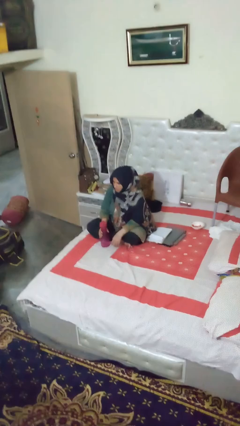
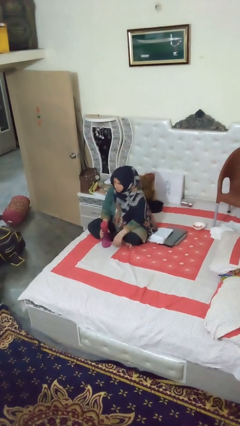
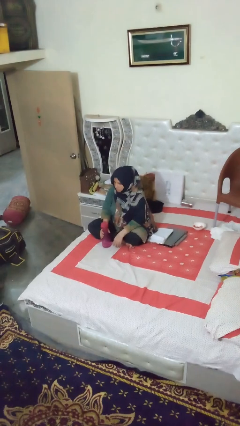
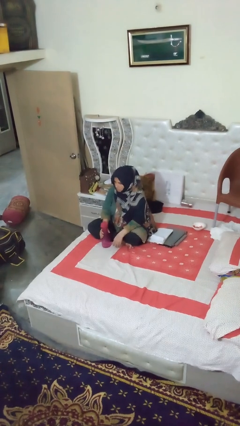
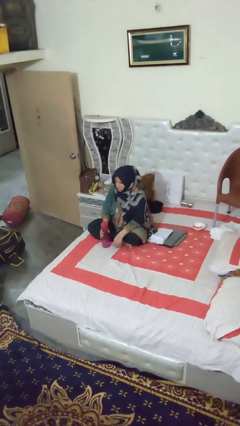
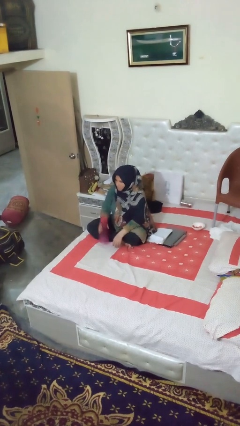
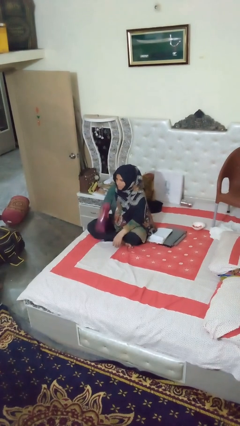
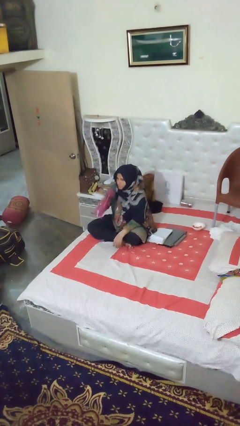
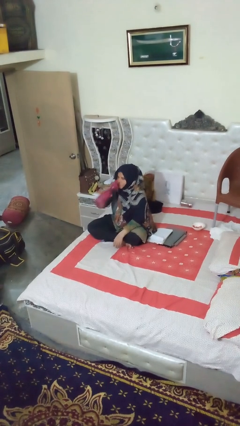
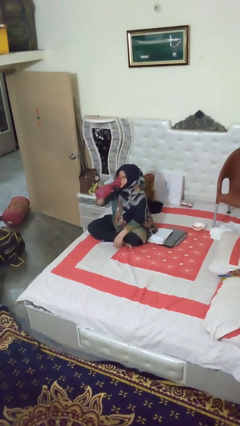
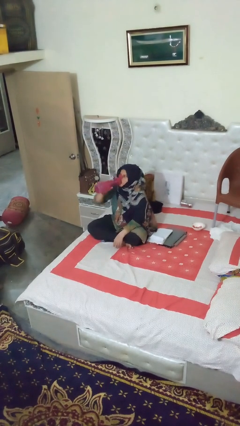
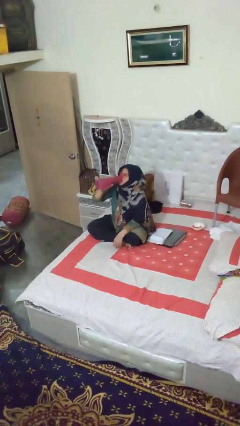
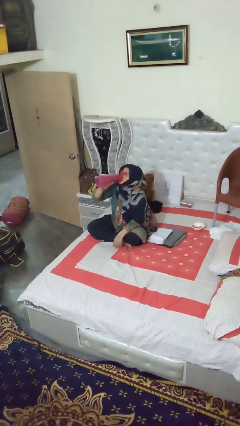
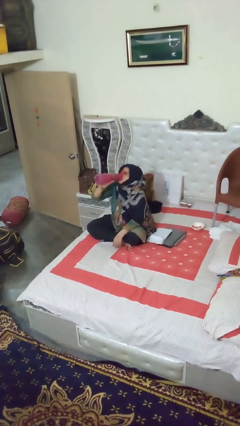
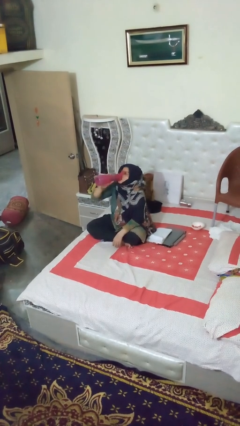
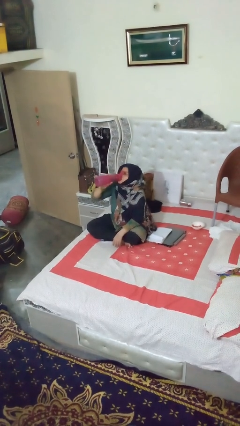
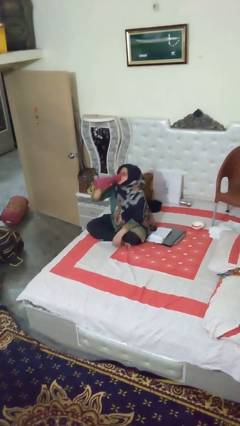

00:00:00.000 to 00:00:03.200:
person drinks from bottle

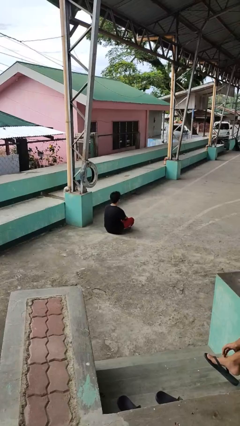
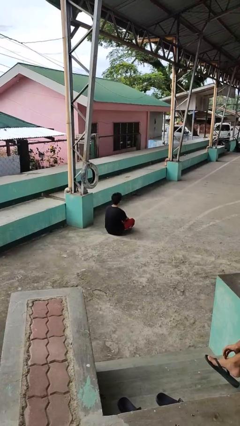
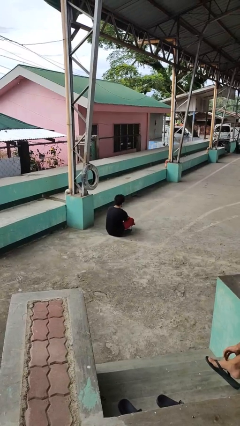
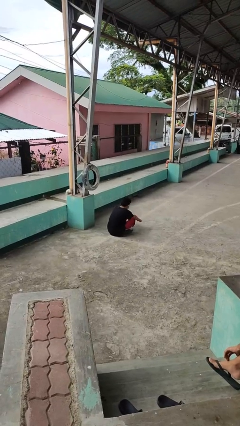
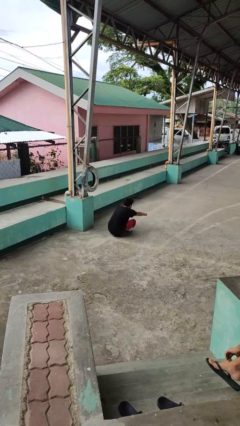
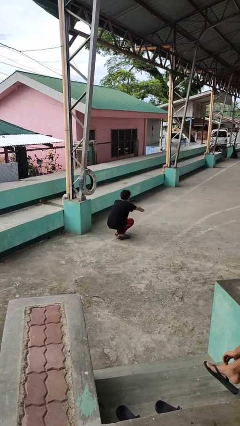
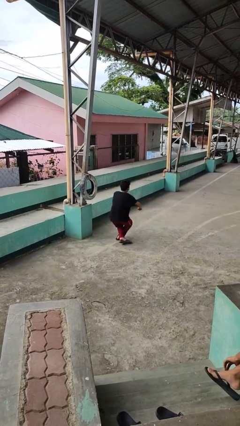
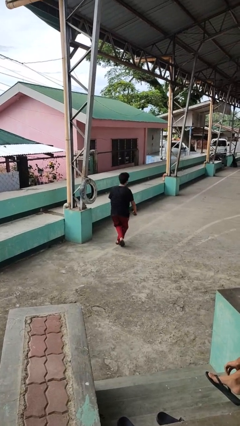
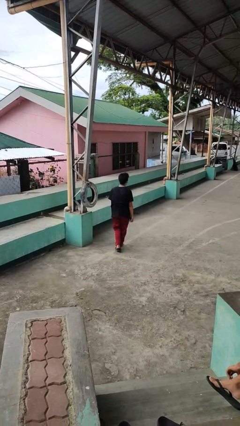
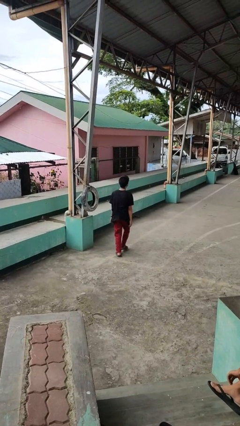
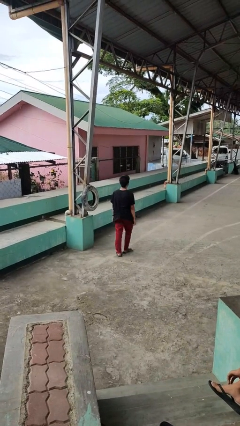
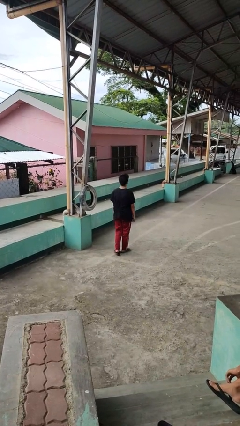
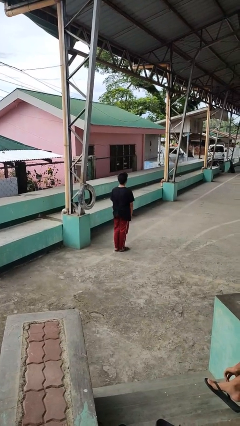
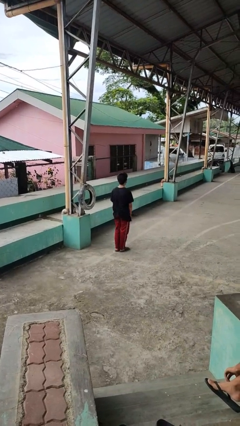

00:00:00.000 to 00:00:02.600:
person stands up from floor

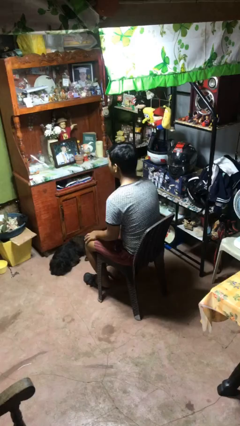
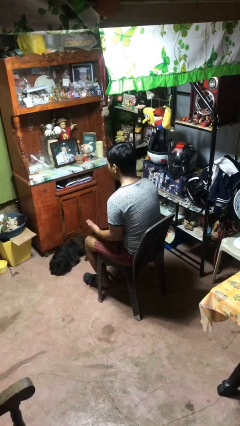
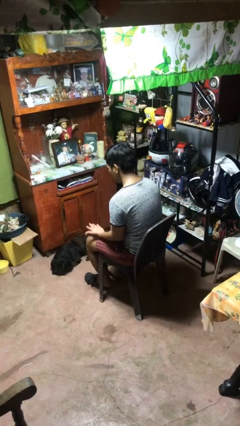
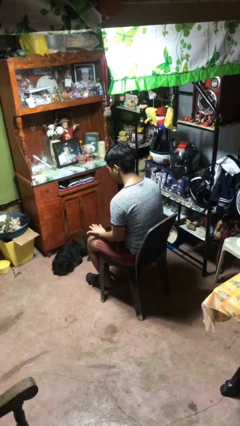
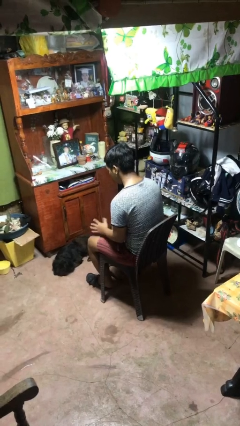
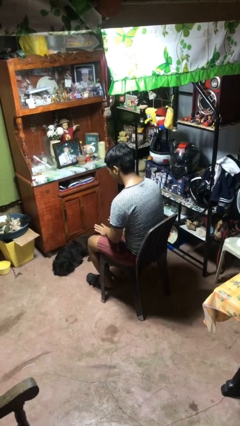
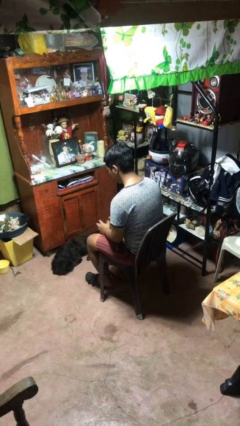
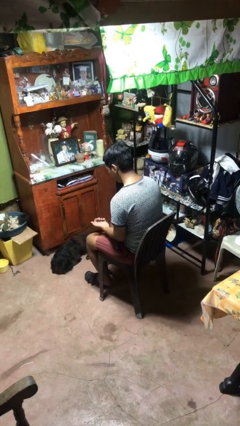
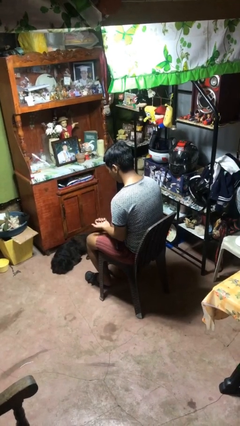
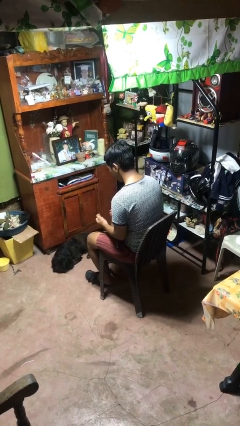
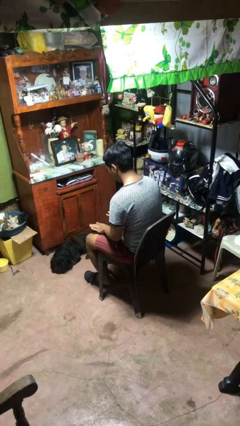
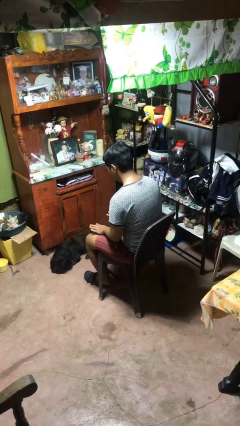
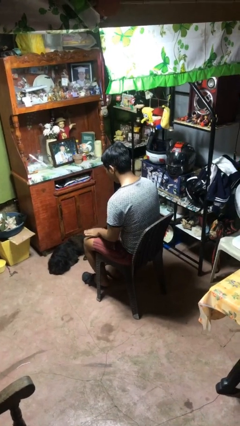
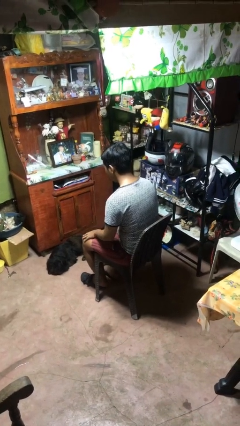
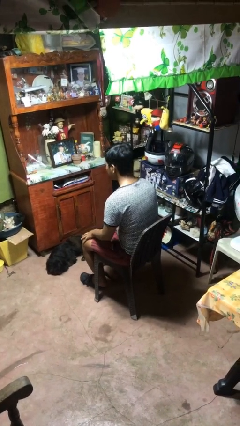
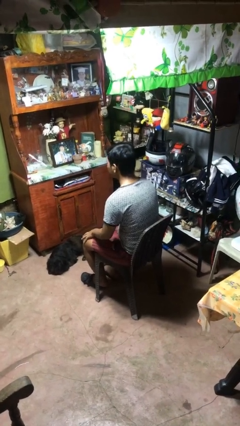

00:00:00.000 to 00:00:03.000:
person looks at hands in lap

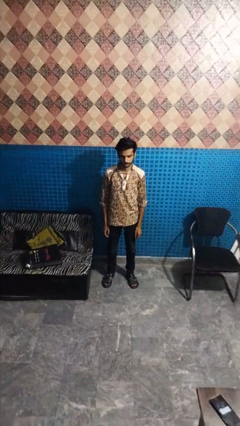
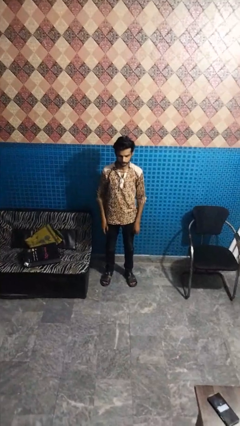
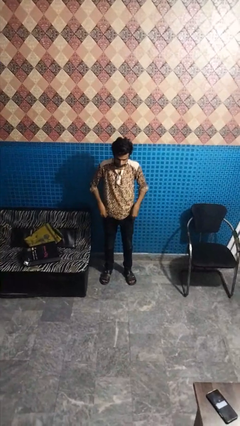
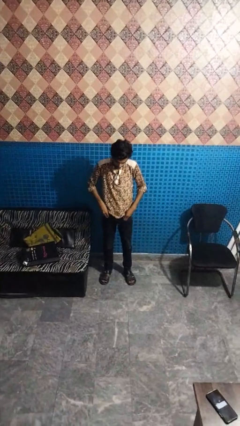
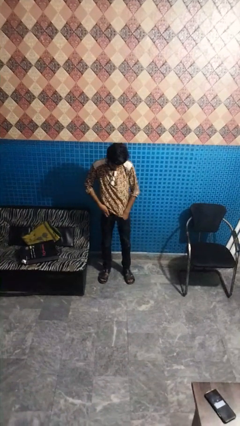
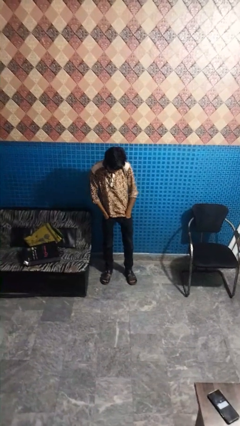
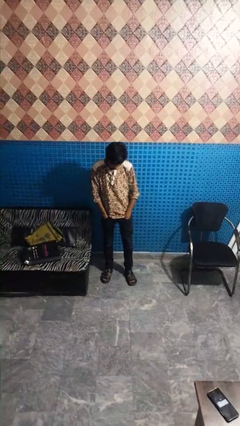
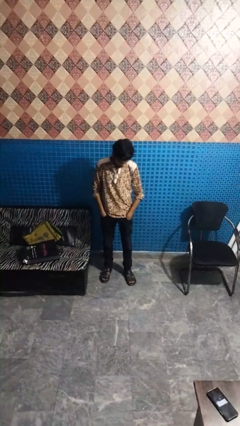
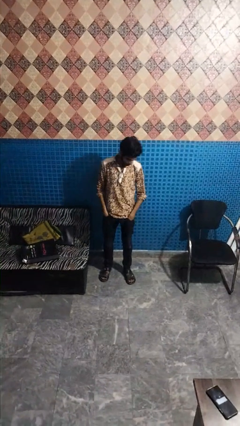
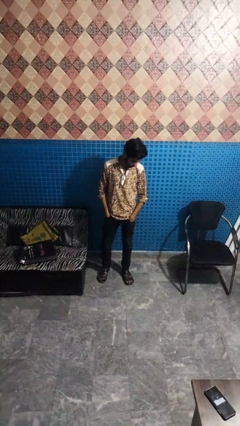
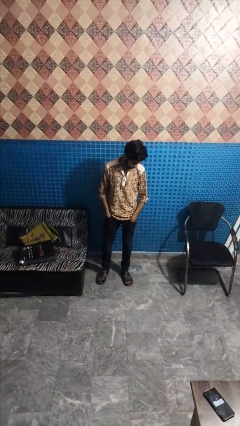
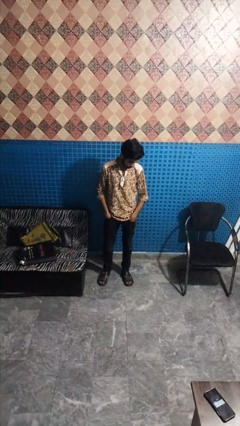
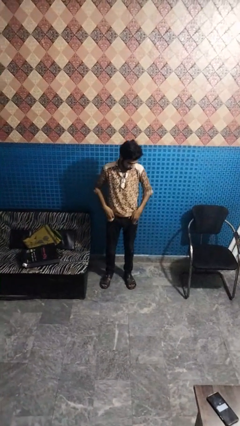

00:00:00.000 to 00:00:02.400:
person puts hands in back pockets

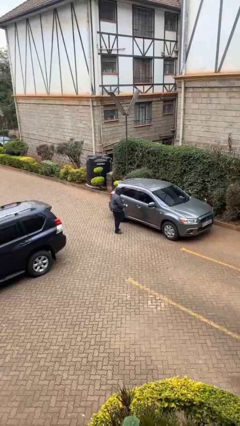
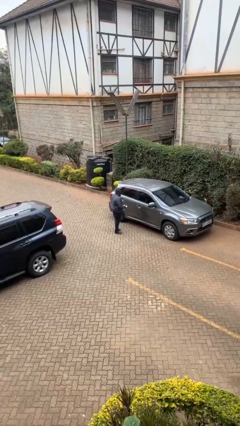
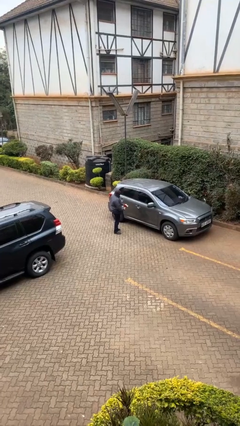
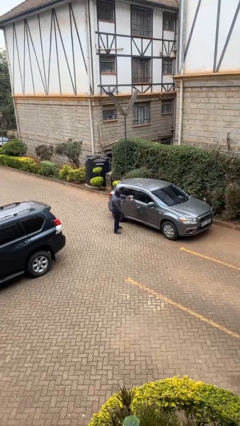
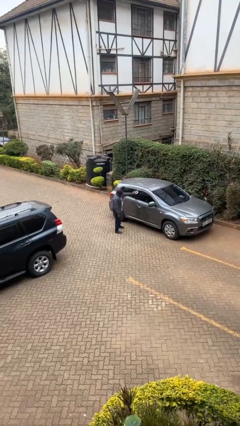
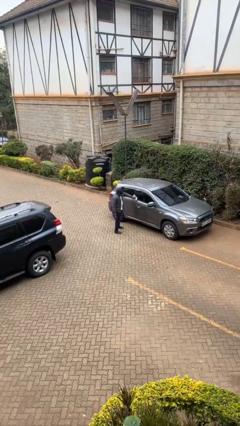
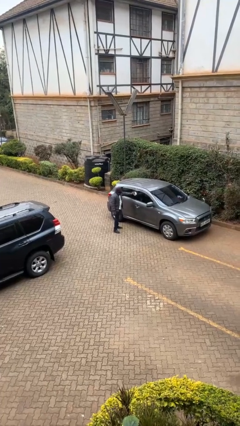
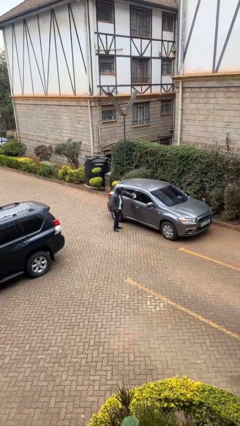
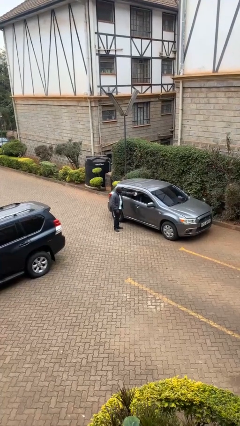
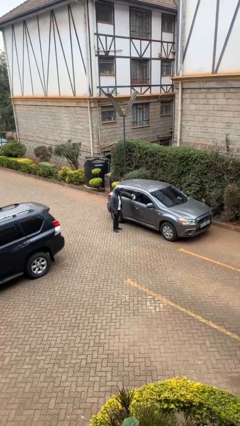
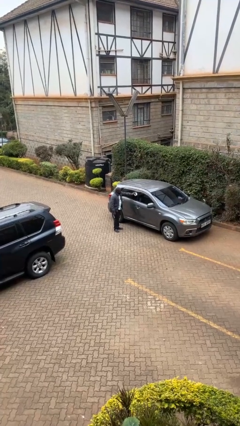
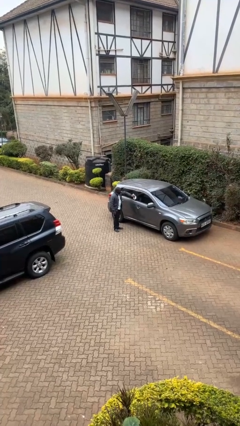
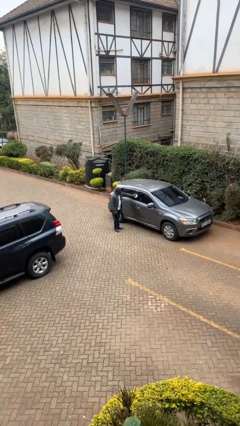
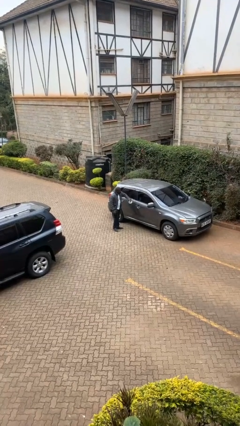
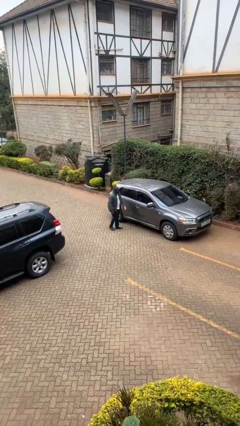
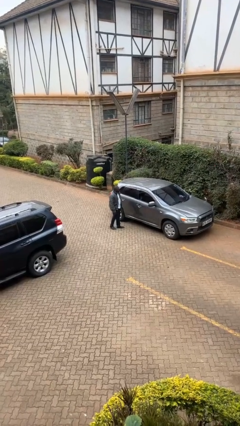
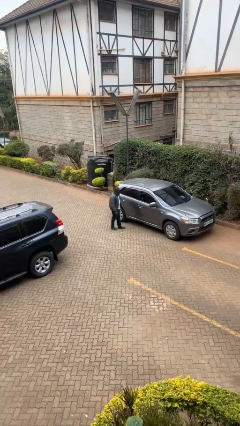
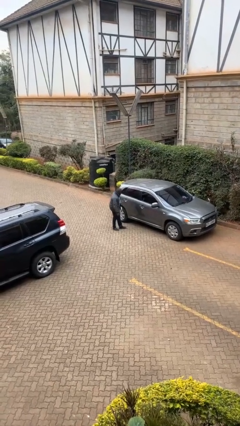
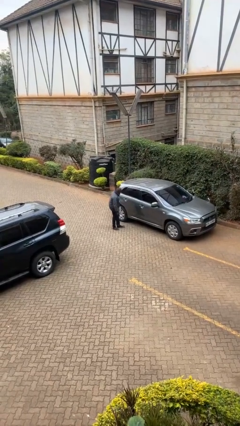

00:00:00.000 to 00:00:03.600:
person polishes car with rag

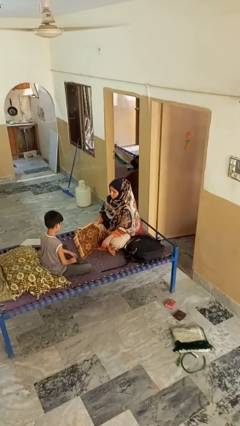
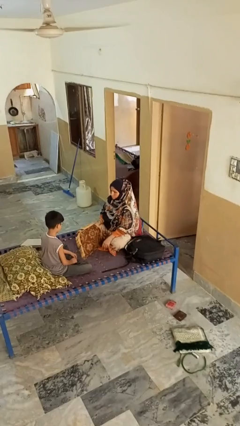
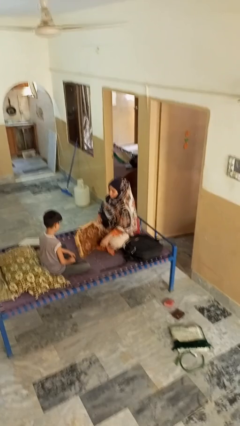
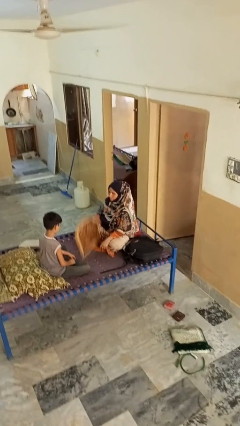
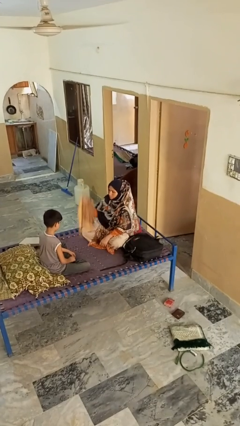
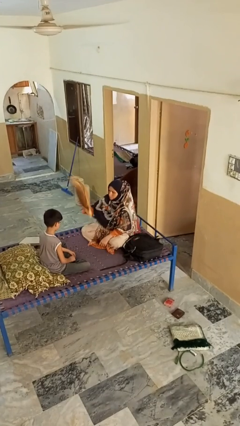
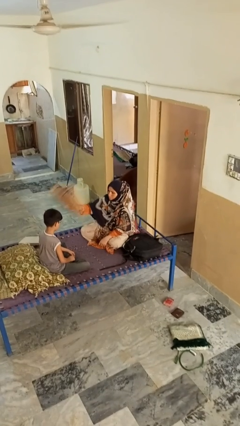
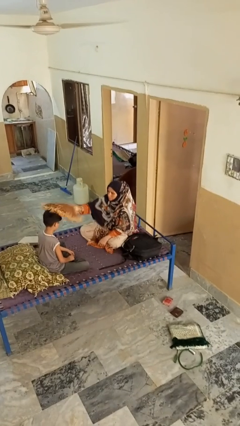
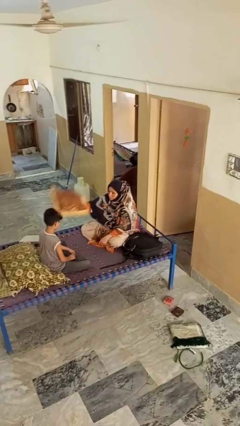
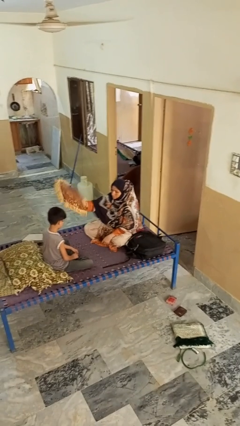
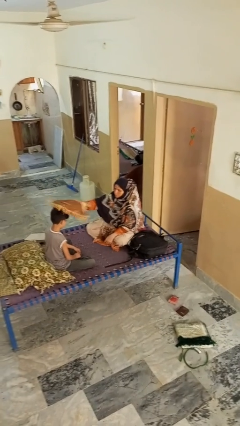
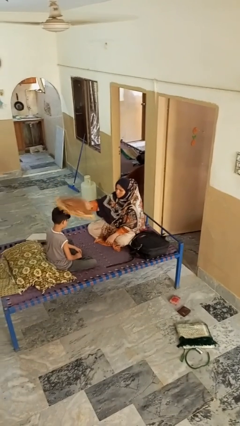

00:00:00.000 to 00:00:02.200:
person hits person with pillow

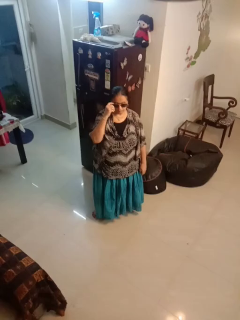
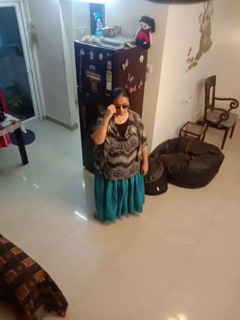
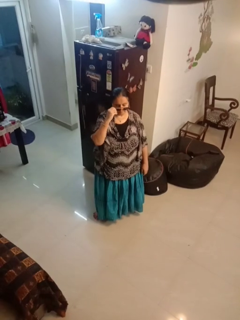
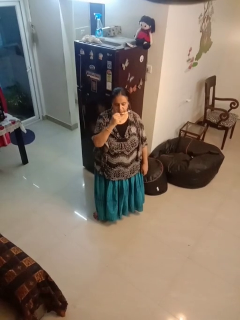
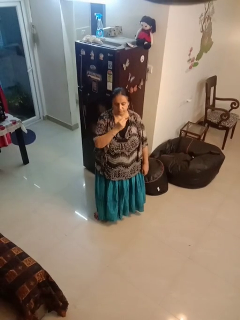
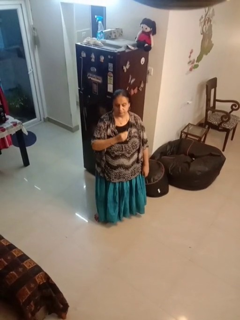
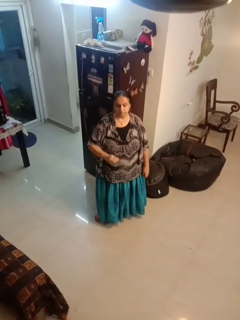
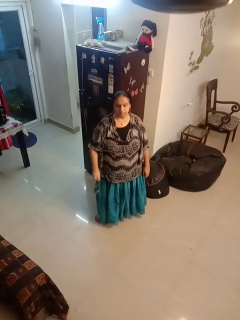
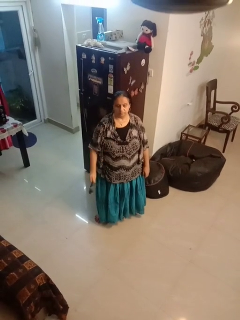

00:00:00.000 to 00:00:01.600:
person takes off sunglasses
